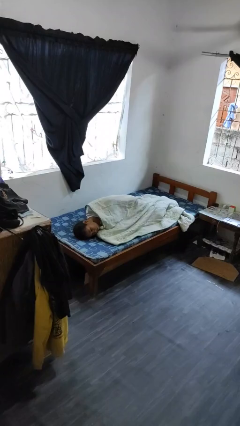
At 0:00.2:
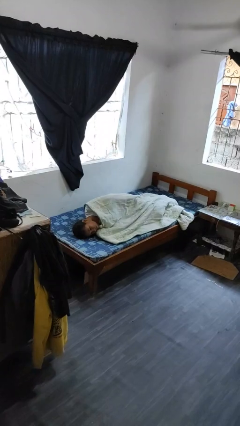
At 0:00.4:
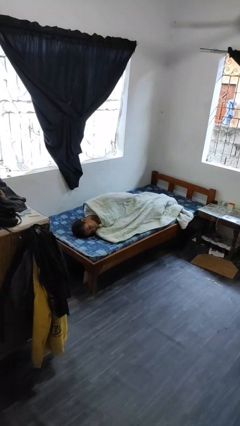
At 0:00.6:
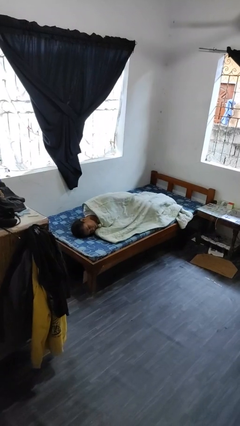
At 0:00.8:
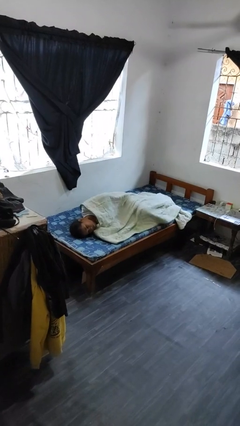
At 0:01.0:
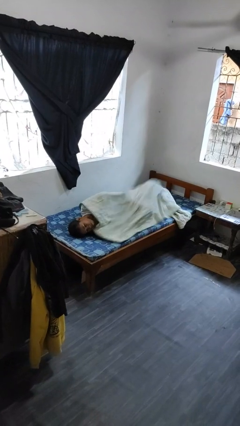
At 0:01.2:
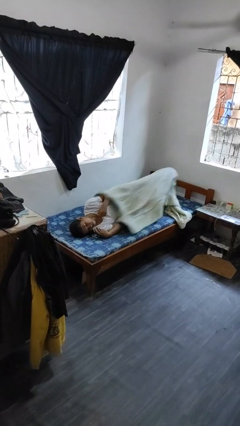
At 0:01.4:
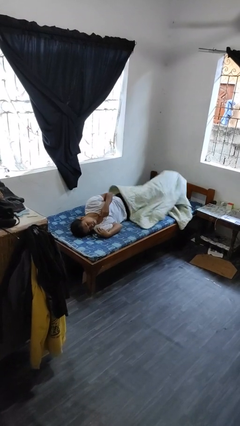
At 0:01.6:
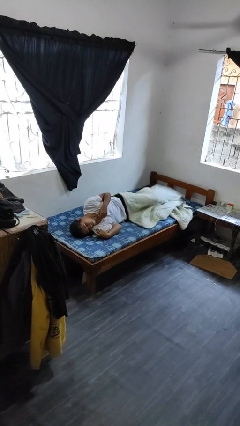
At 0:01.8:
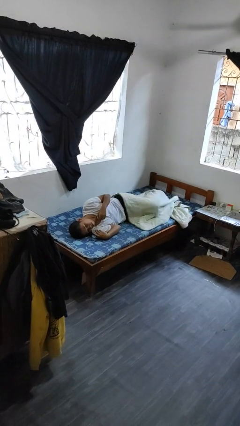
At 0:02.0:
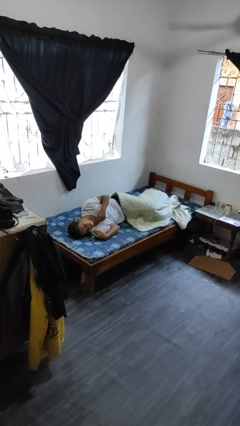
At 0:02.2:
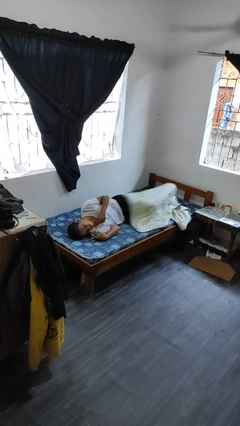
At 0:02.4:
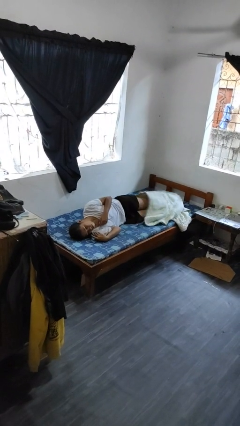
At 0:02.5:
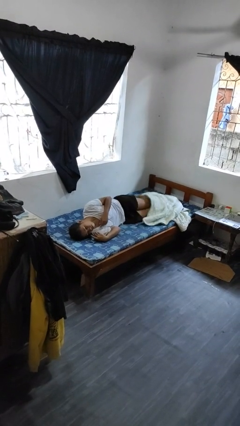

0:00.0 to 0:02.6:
person uncovers with bedsheets

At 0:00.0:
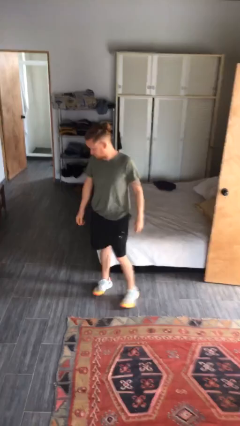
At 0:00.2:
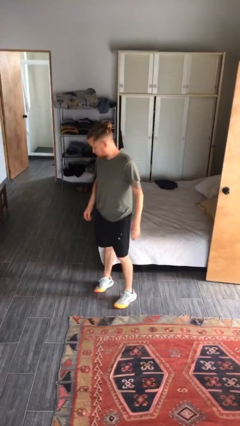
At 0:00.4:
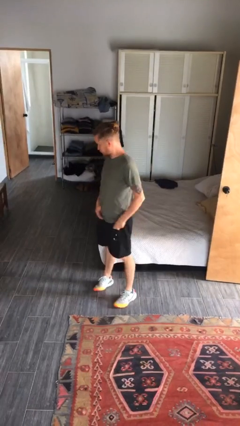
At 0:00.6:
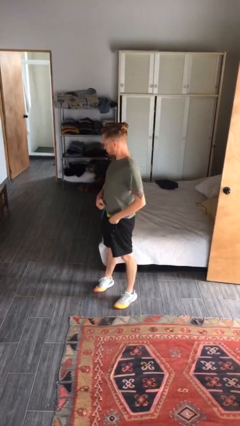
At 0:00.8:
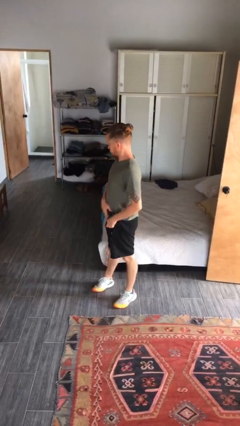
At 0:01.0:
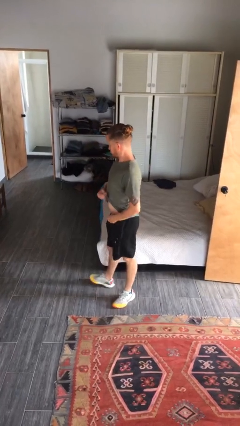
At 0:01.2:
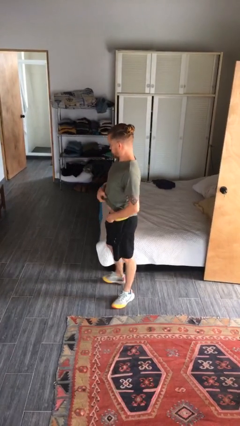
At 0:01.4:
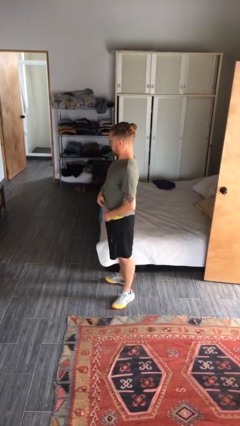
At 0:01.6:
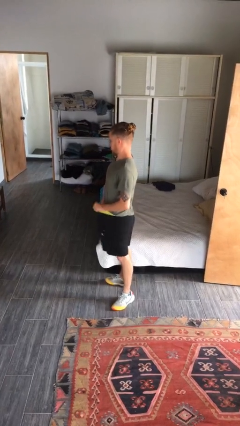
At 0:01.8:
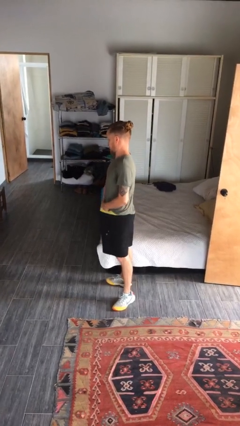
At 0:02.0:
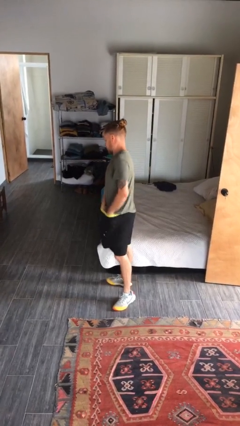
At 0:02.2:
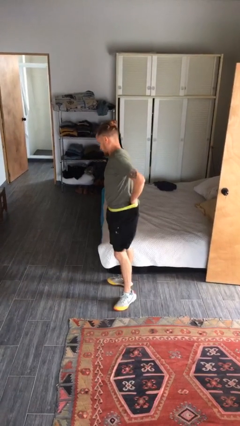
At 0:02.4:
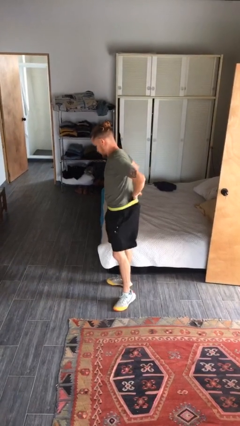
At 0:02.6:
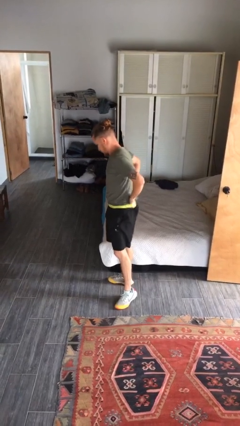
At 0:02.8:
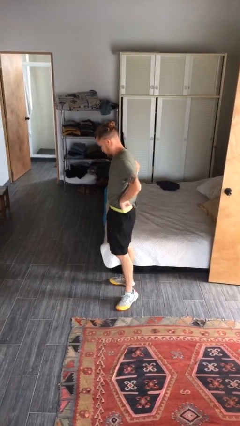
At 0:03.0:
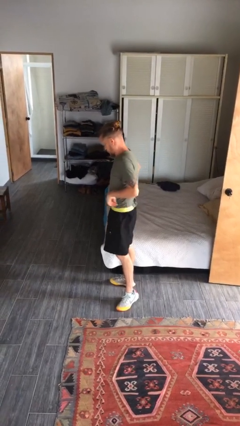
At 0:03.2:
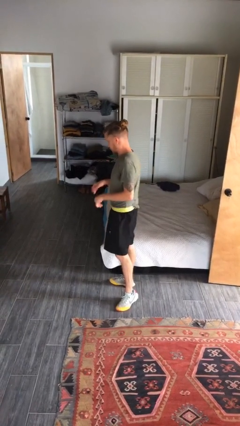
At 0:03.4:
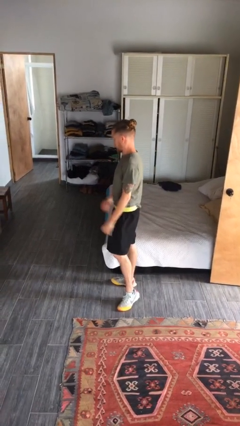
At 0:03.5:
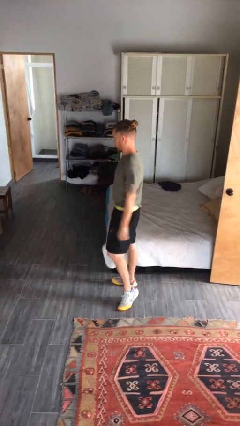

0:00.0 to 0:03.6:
person tucks in shirt

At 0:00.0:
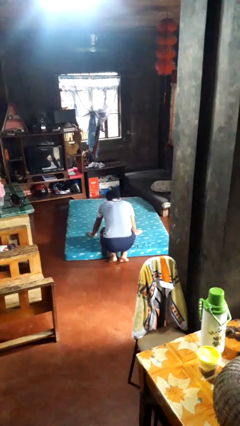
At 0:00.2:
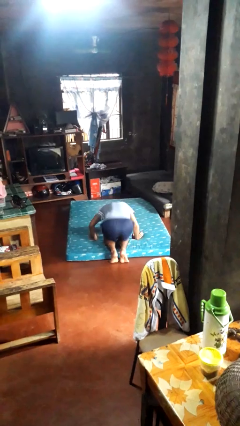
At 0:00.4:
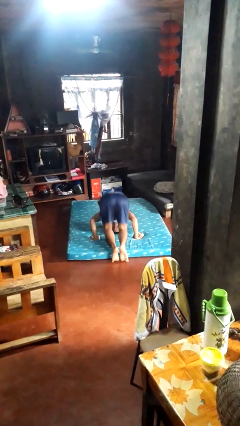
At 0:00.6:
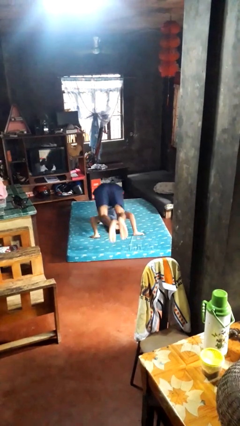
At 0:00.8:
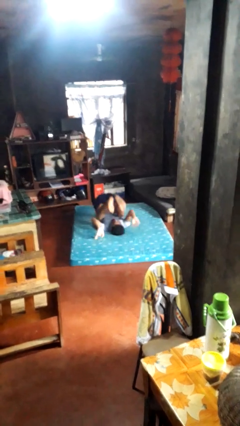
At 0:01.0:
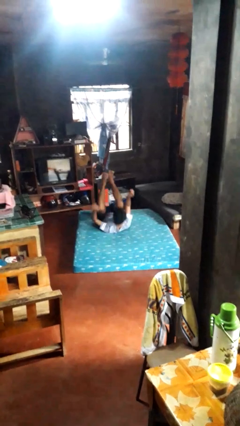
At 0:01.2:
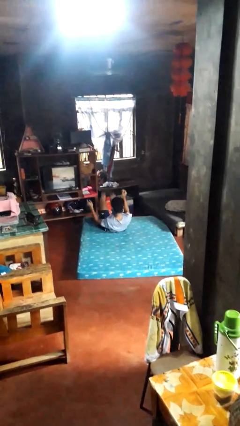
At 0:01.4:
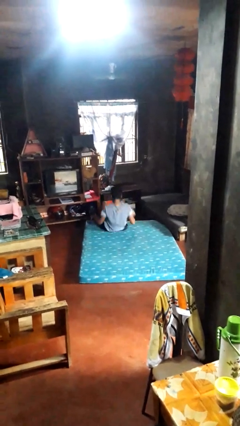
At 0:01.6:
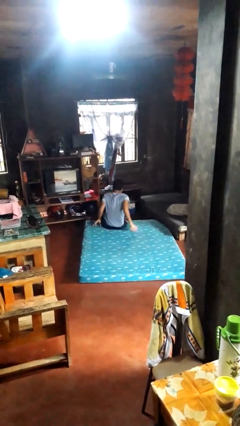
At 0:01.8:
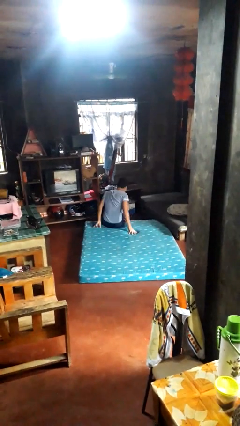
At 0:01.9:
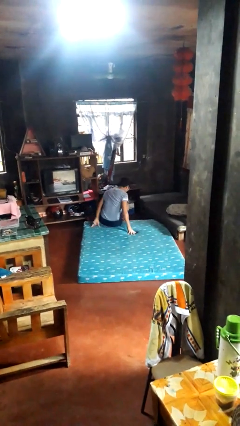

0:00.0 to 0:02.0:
person somersaults

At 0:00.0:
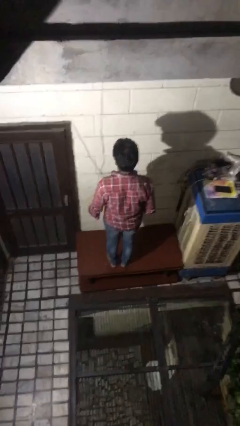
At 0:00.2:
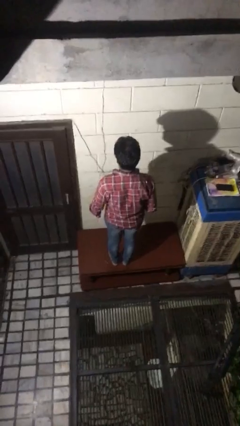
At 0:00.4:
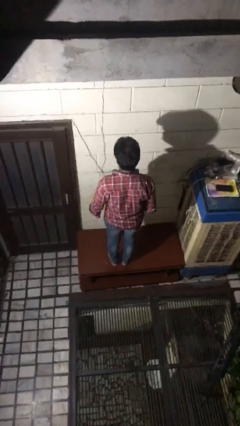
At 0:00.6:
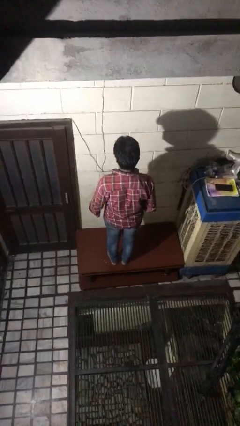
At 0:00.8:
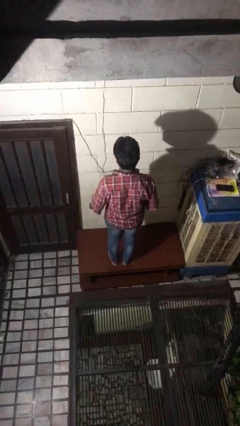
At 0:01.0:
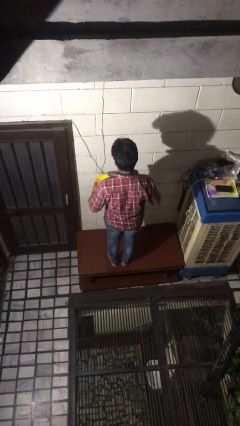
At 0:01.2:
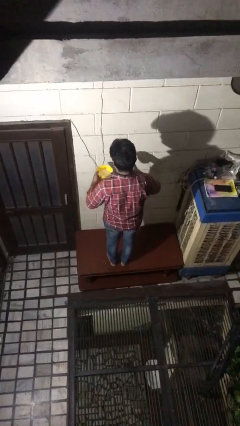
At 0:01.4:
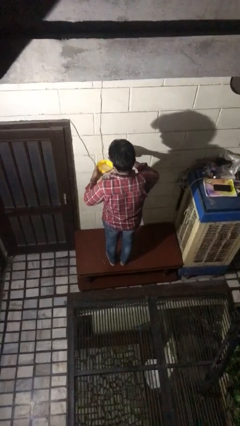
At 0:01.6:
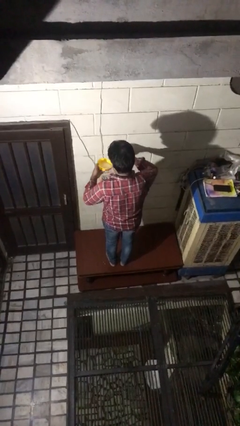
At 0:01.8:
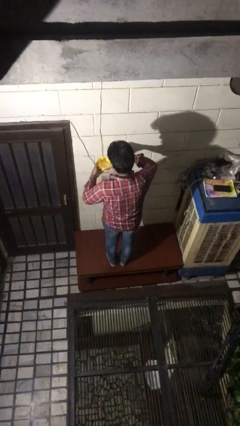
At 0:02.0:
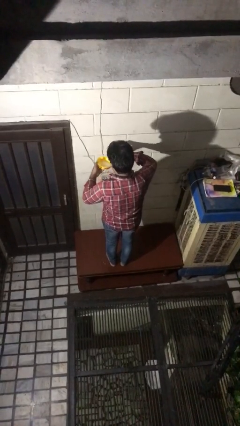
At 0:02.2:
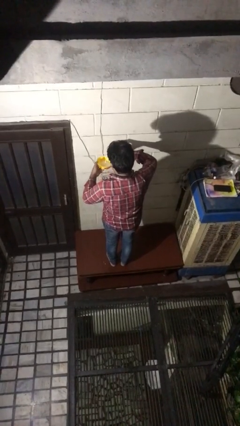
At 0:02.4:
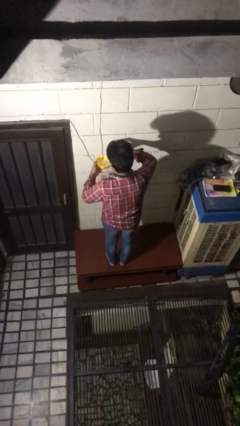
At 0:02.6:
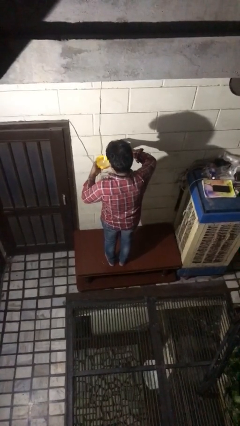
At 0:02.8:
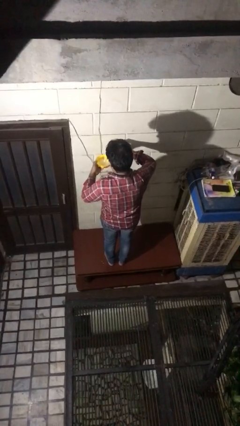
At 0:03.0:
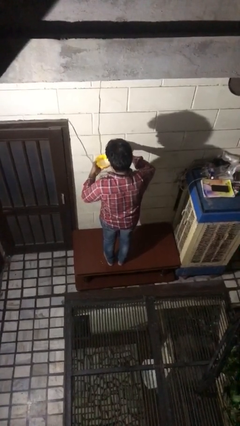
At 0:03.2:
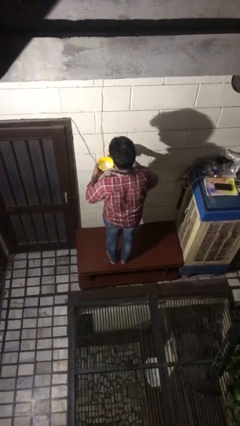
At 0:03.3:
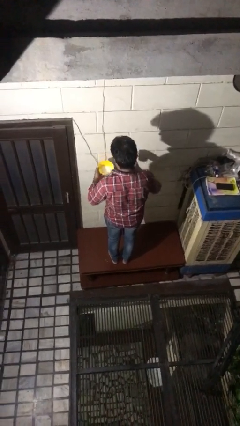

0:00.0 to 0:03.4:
person pours into bowl

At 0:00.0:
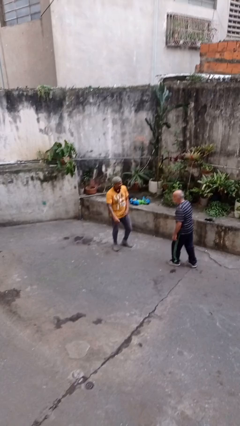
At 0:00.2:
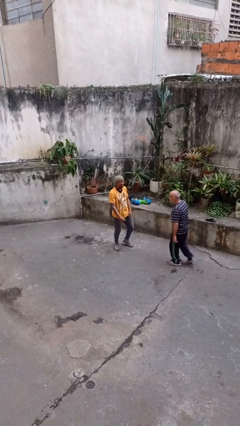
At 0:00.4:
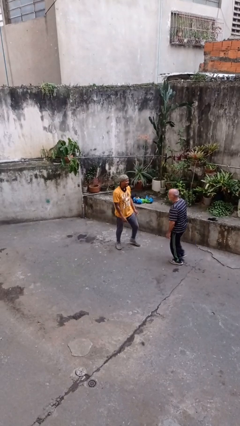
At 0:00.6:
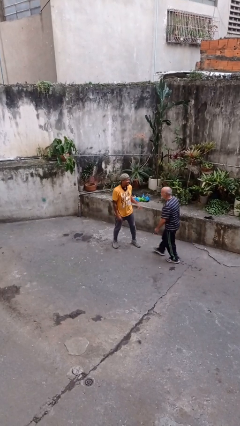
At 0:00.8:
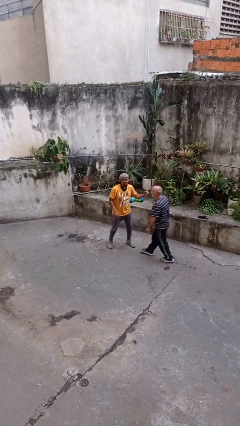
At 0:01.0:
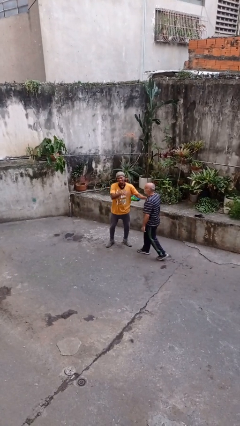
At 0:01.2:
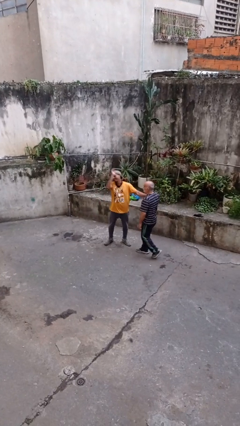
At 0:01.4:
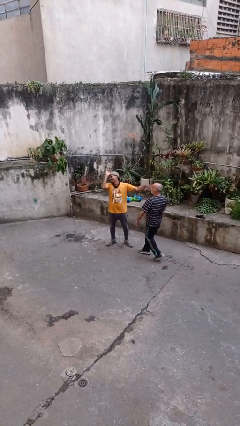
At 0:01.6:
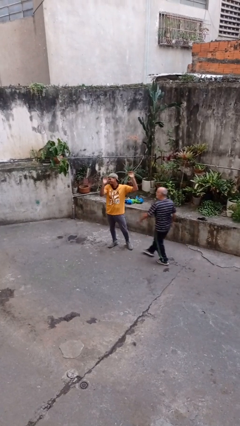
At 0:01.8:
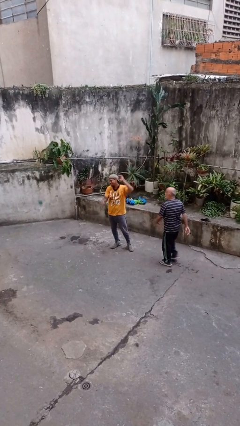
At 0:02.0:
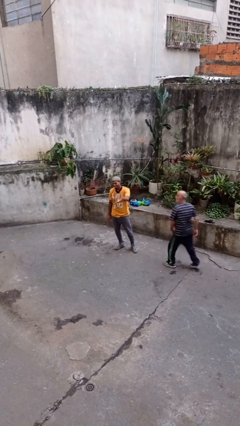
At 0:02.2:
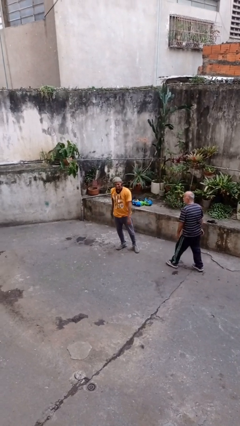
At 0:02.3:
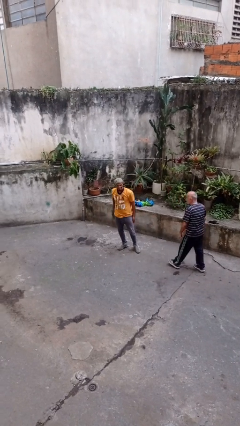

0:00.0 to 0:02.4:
person shoves person

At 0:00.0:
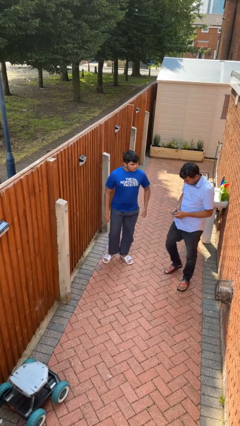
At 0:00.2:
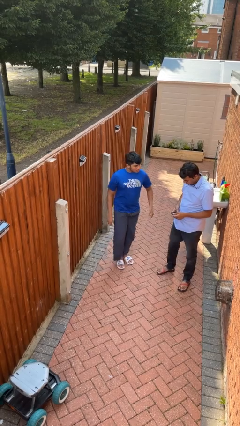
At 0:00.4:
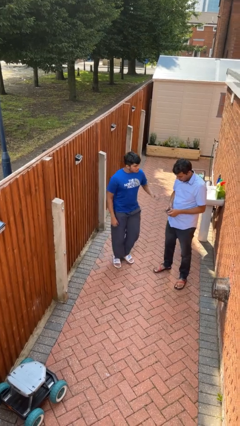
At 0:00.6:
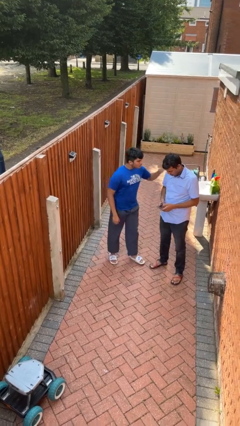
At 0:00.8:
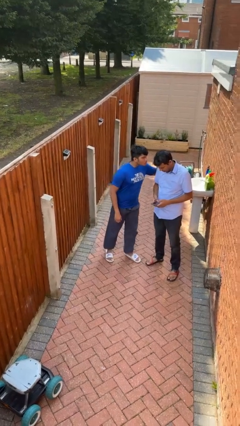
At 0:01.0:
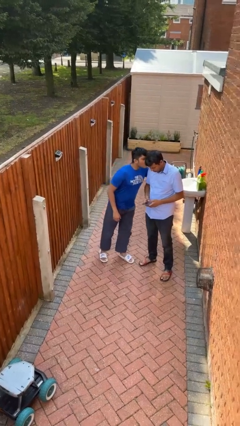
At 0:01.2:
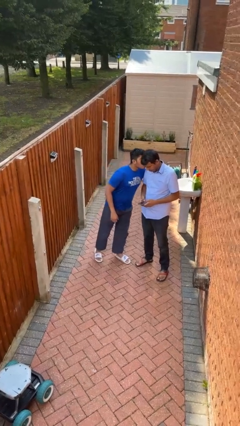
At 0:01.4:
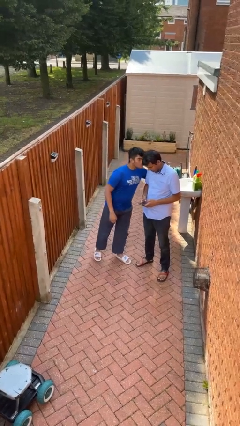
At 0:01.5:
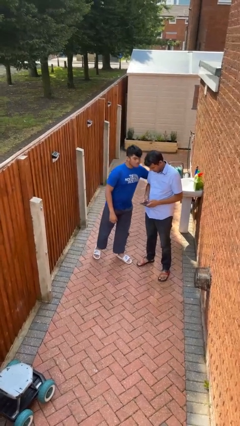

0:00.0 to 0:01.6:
person kisses cheek of person

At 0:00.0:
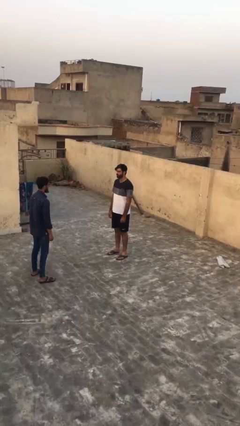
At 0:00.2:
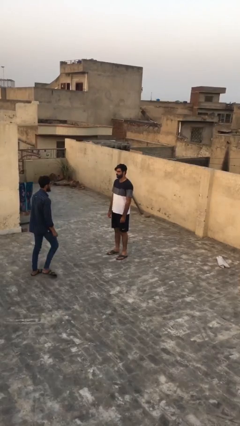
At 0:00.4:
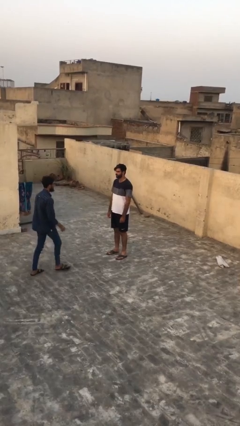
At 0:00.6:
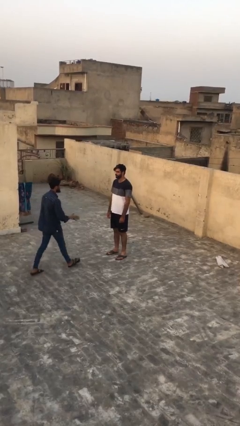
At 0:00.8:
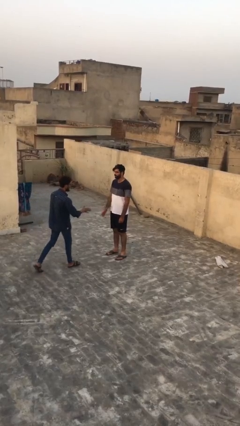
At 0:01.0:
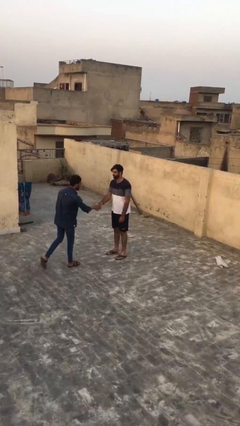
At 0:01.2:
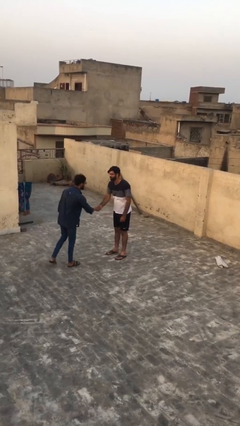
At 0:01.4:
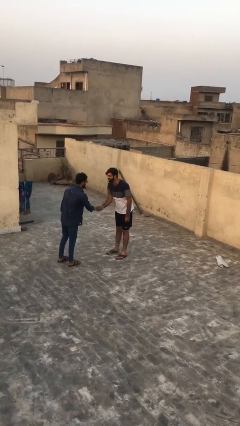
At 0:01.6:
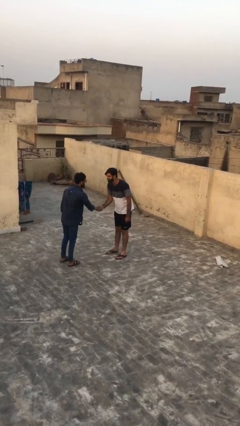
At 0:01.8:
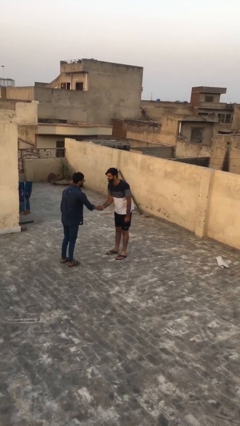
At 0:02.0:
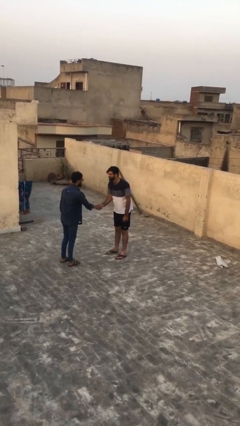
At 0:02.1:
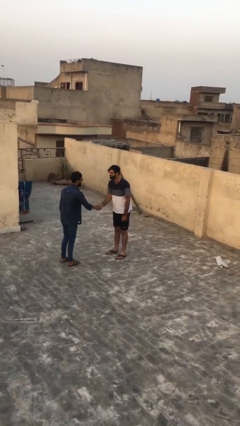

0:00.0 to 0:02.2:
person shakes hand
